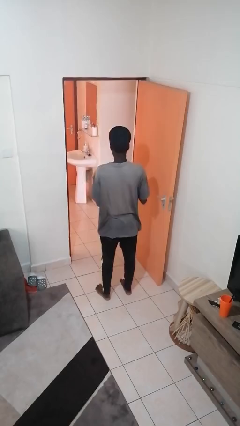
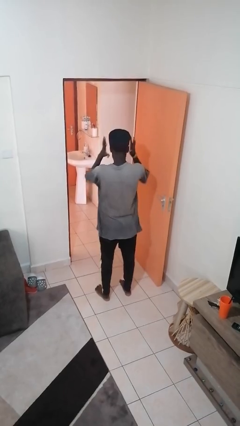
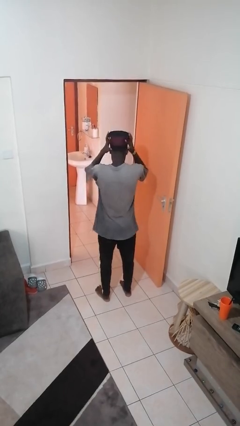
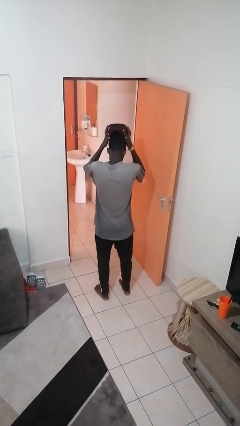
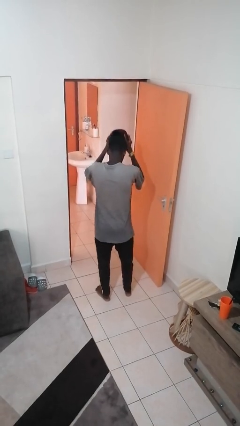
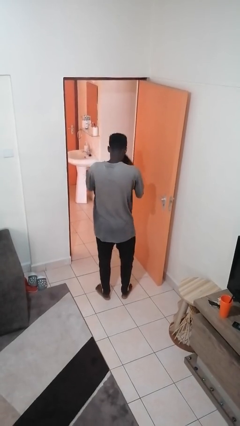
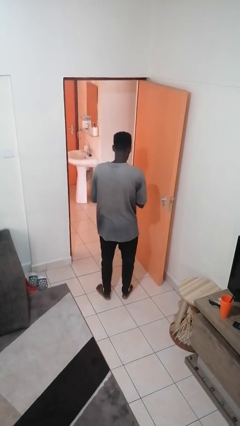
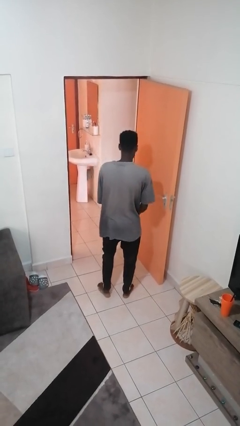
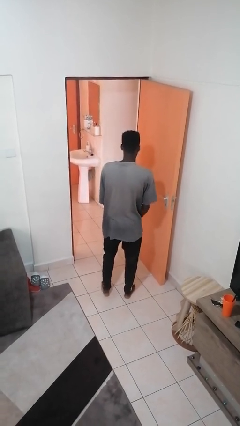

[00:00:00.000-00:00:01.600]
person takes off hat

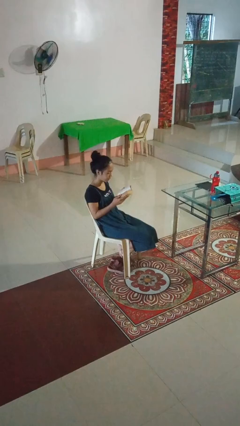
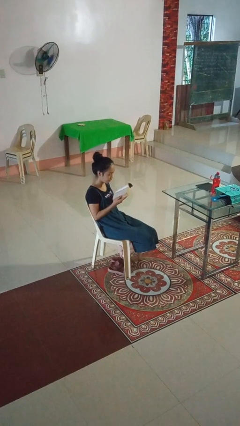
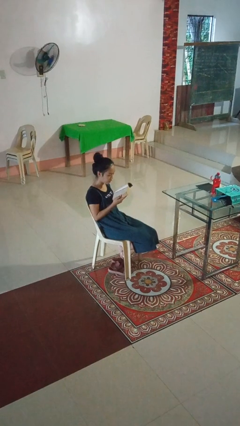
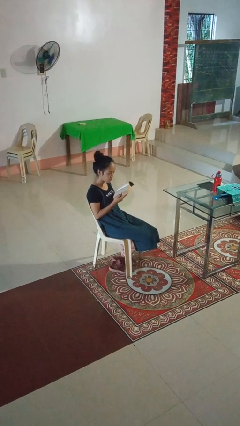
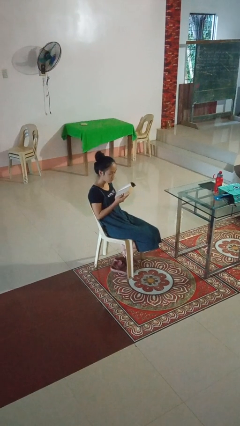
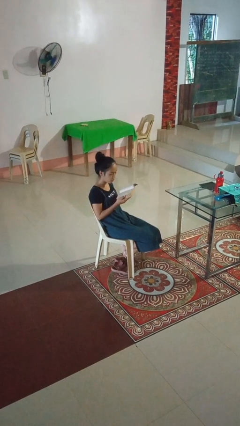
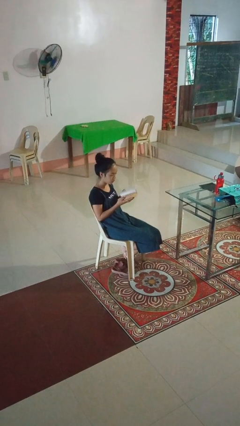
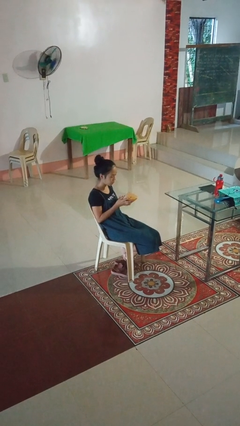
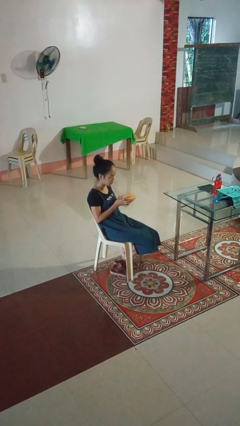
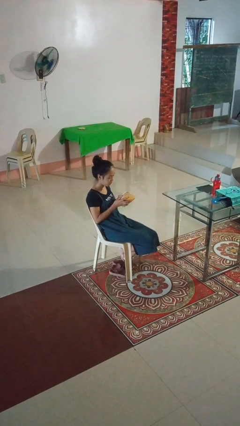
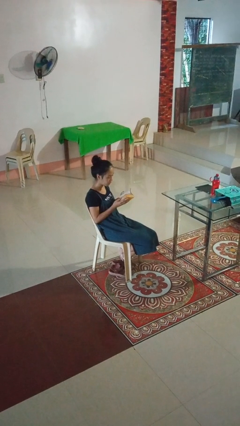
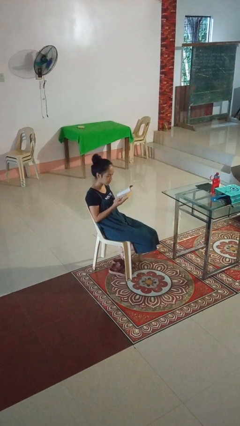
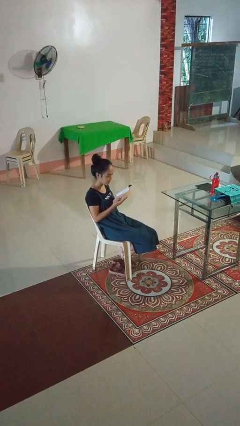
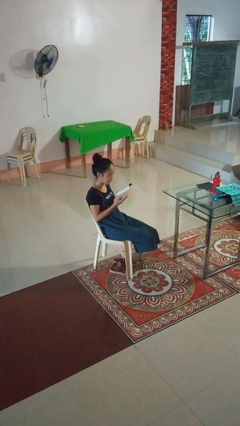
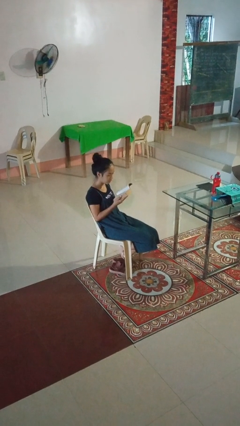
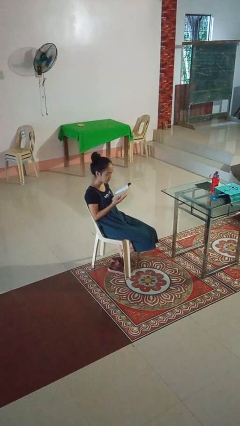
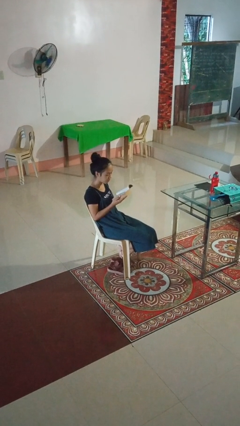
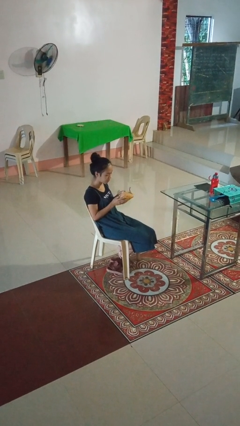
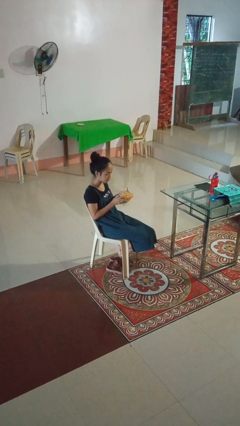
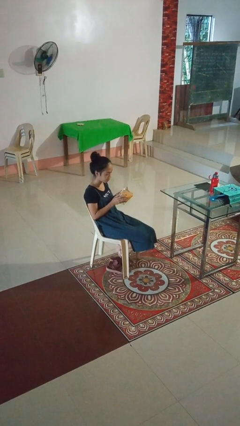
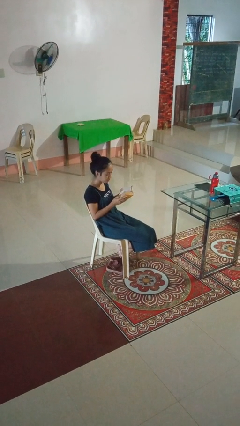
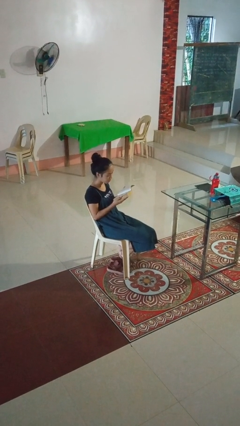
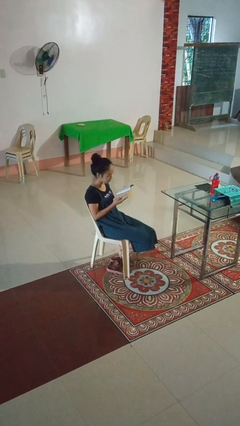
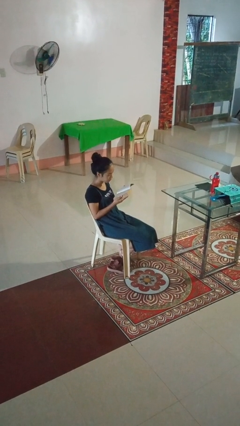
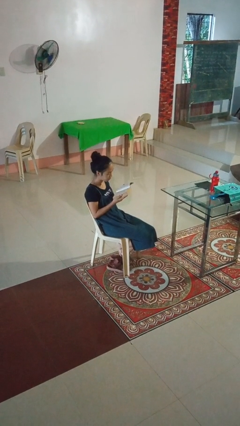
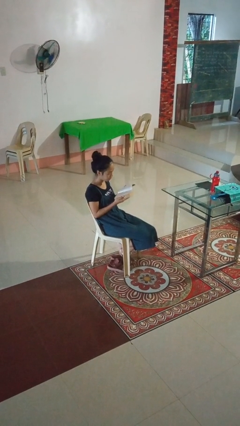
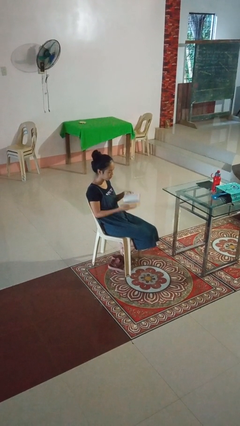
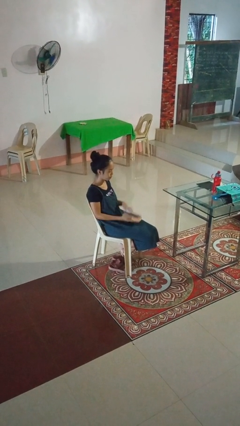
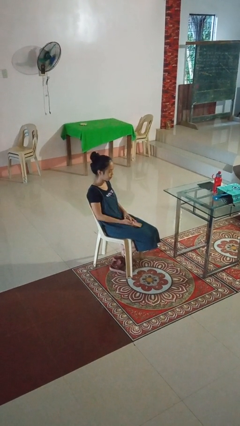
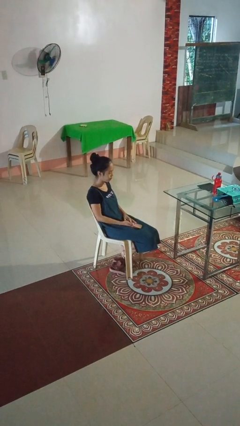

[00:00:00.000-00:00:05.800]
person reads book

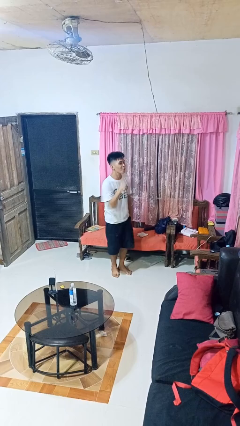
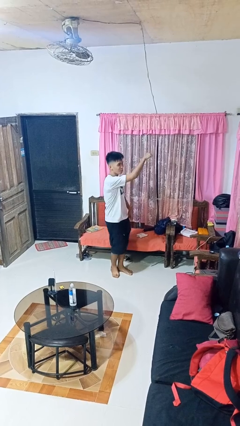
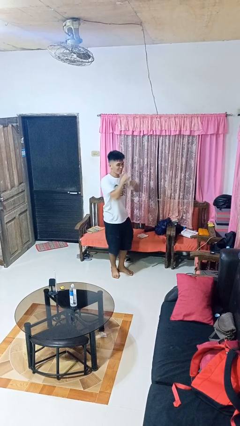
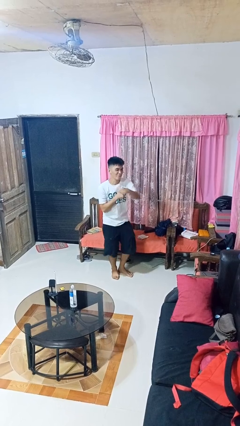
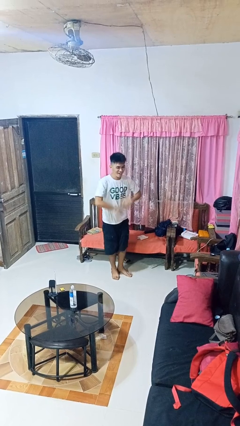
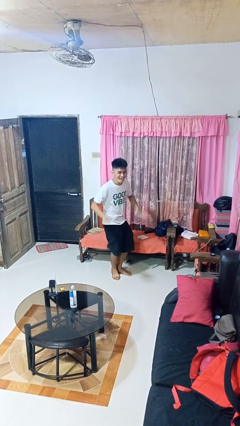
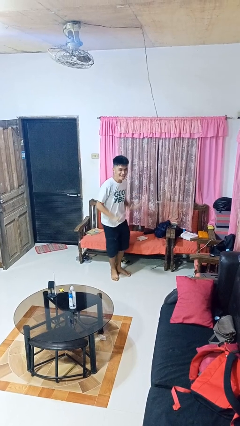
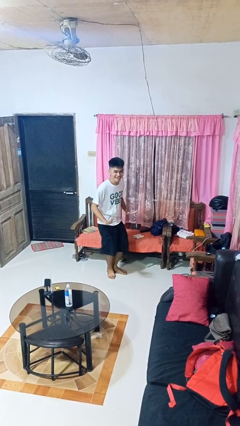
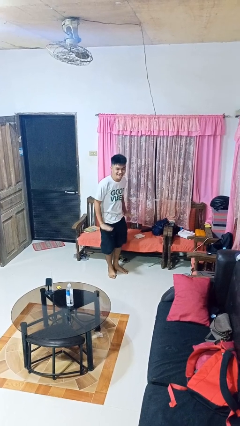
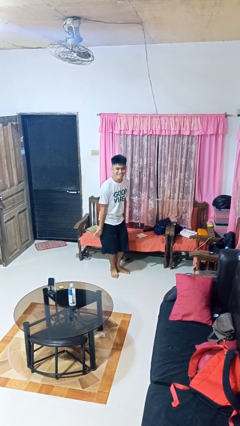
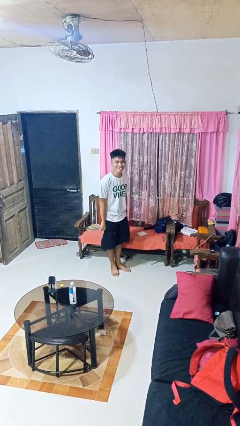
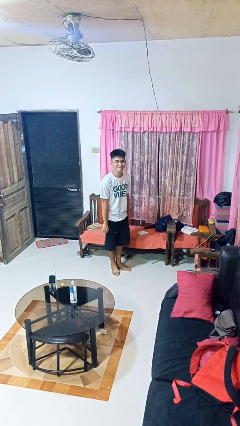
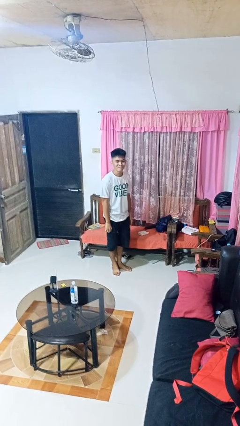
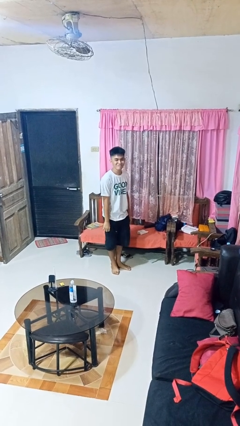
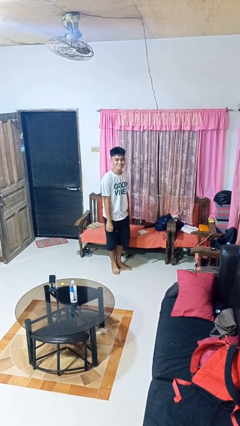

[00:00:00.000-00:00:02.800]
person dances in place

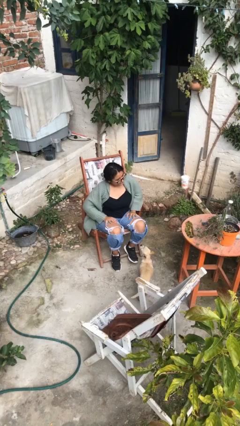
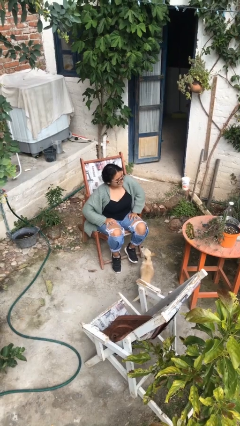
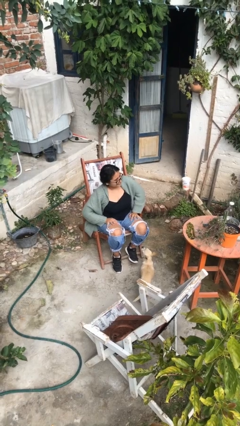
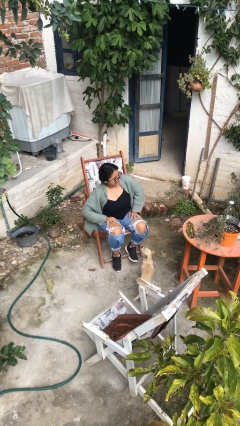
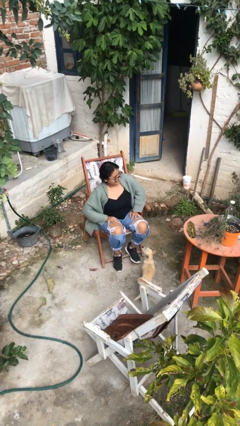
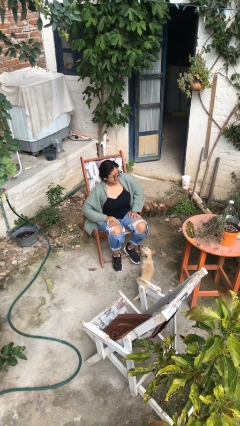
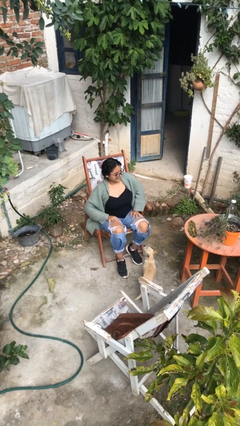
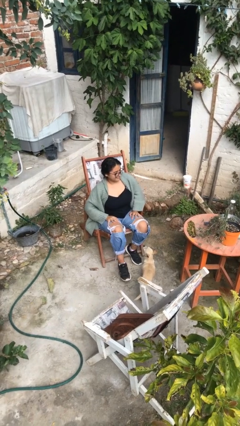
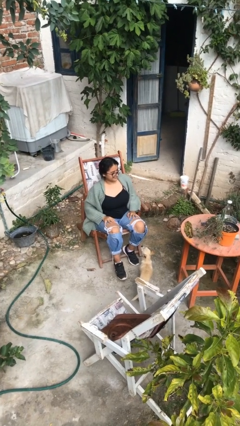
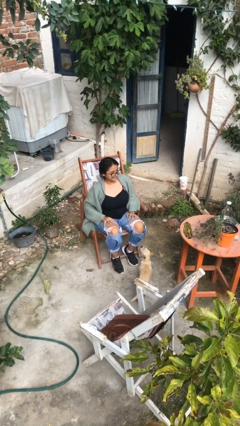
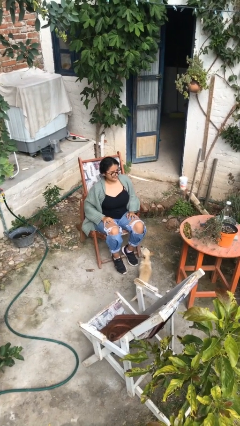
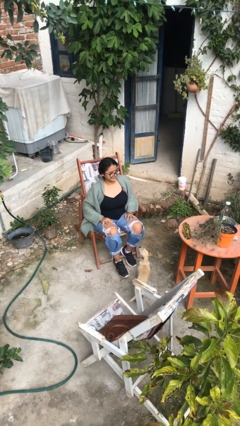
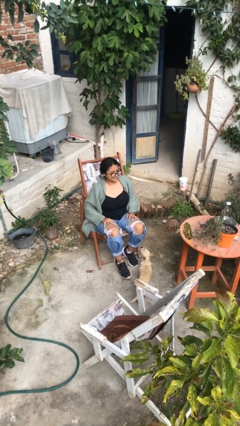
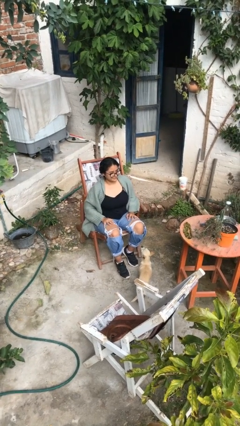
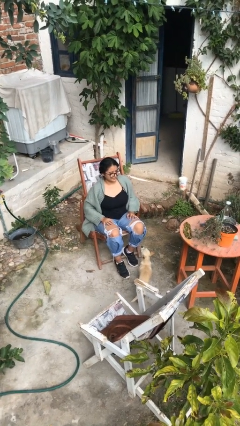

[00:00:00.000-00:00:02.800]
person slaps hands on thighs

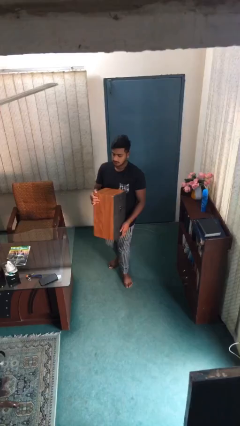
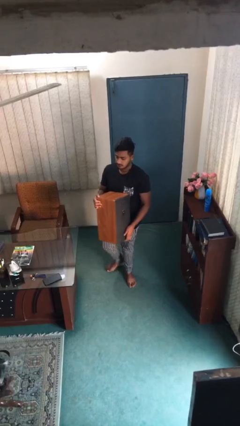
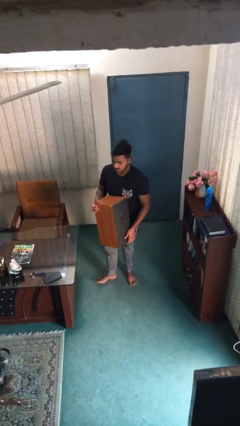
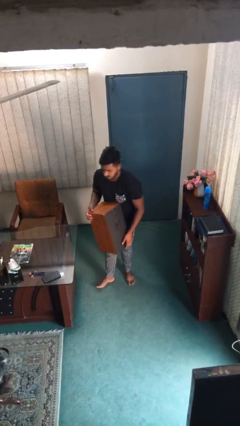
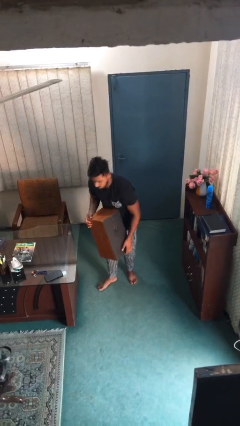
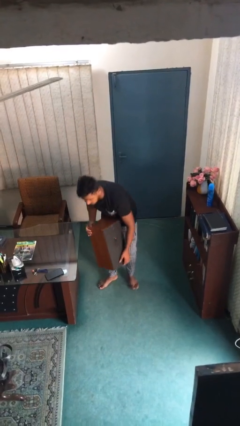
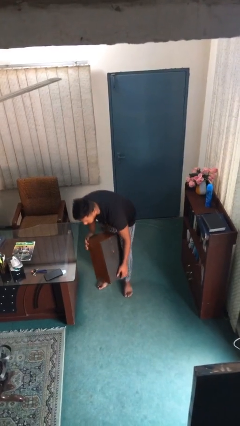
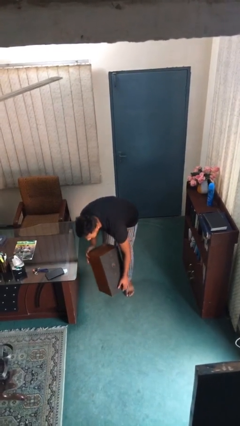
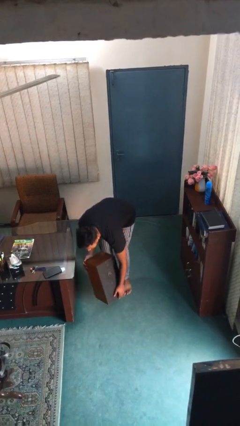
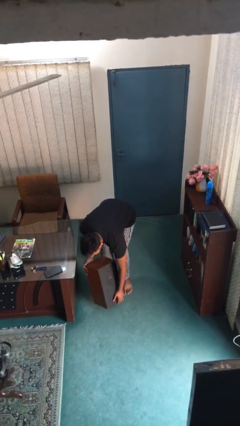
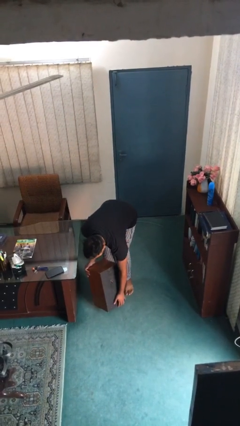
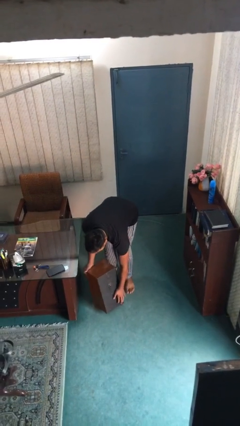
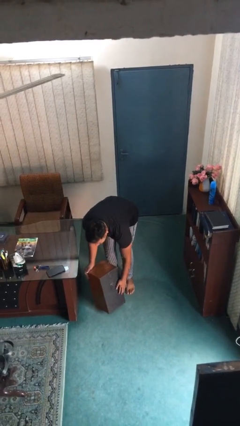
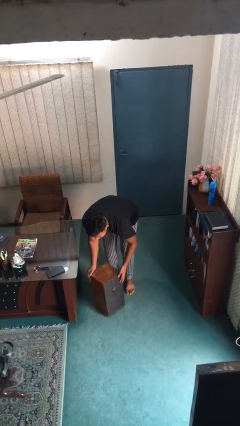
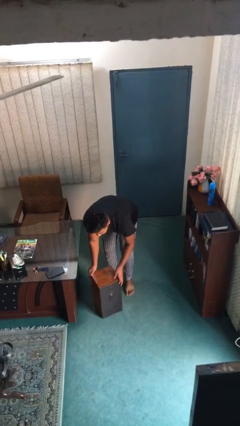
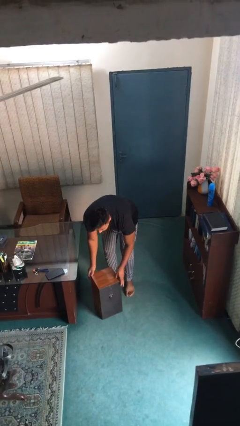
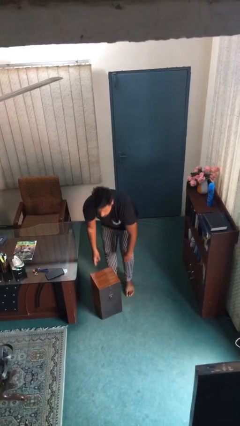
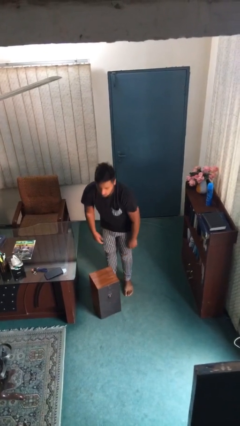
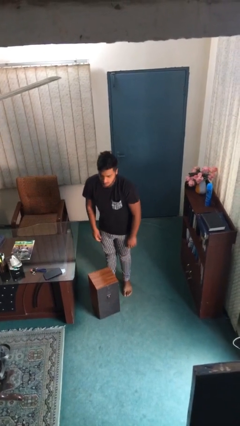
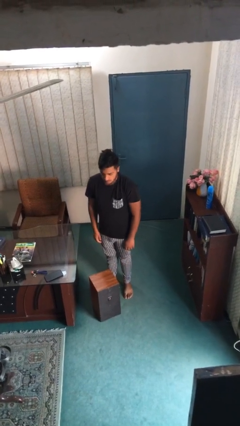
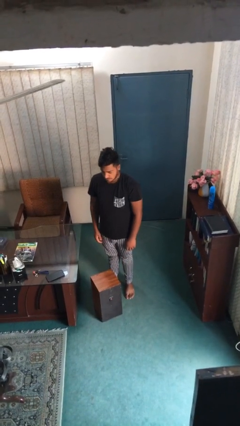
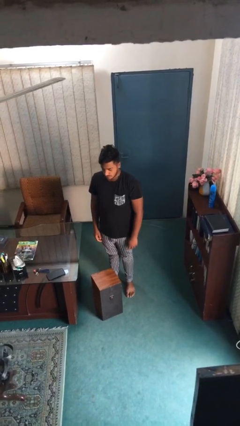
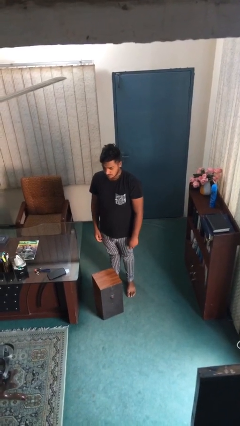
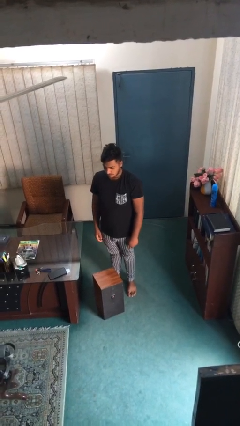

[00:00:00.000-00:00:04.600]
person puts down object on floor
